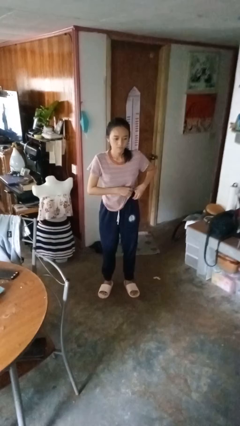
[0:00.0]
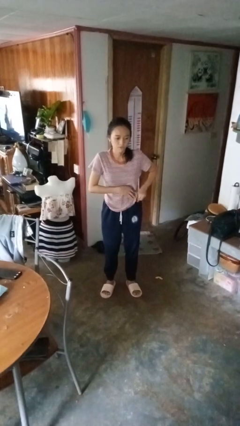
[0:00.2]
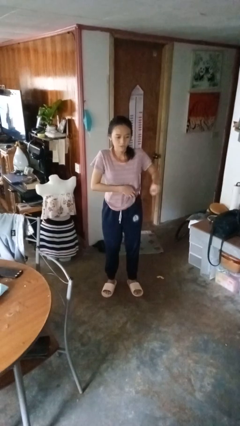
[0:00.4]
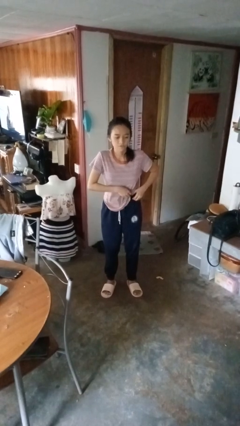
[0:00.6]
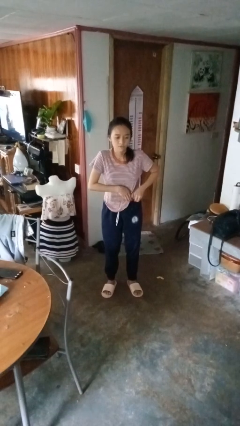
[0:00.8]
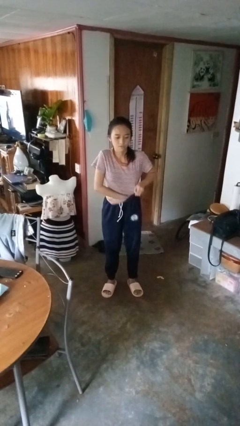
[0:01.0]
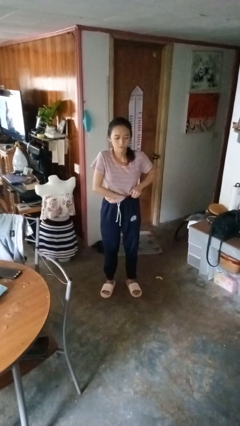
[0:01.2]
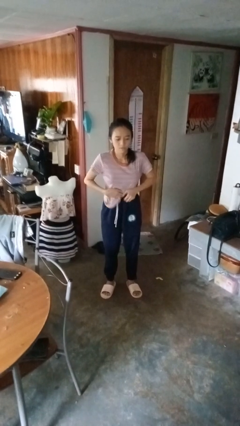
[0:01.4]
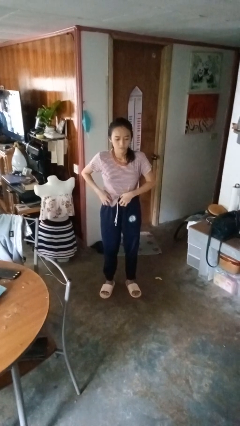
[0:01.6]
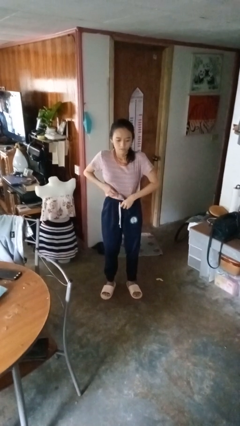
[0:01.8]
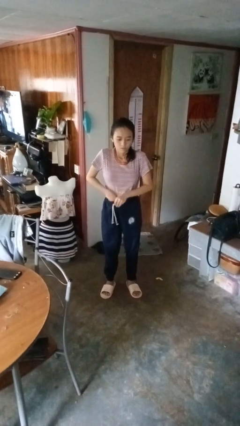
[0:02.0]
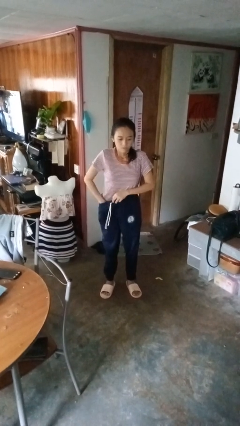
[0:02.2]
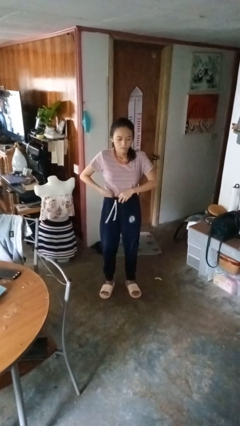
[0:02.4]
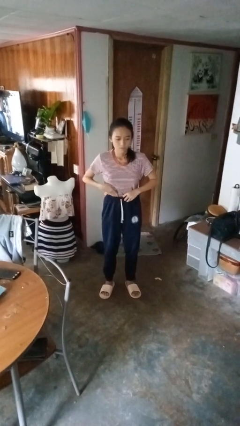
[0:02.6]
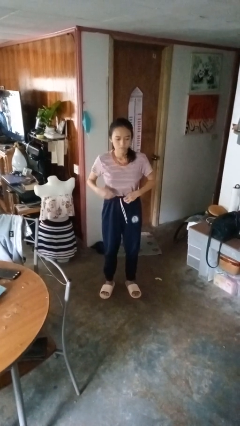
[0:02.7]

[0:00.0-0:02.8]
person tucks in shirt

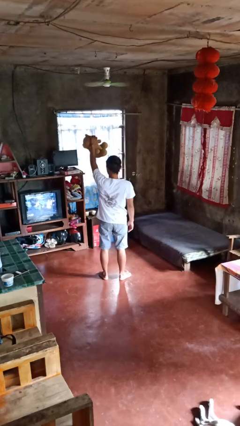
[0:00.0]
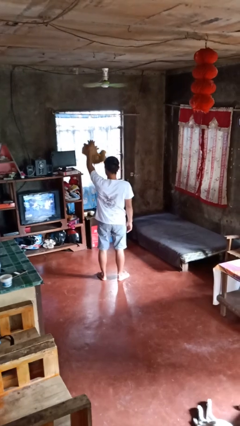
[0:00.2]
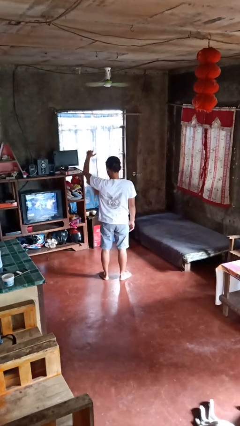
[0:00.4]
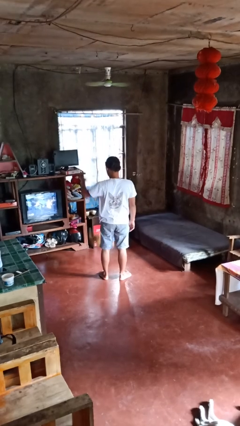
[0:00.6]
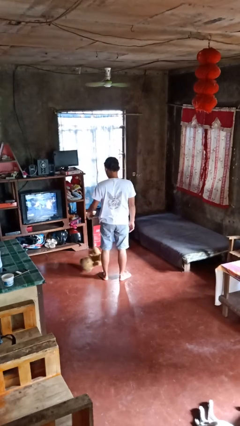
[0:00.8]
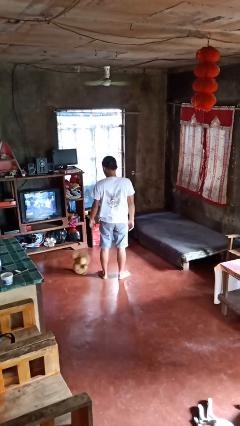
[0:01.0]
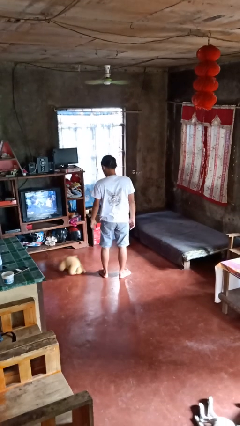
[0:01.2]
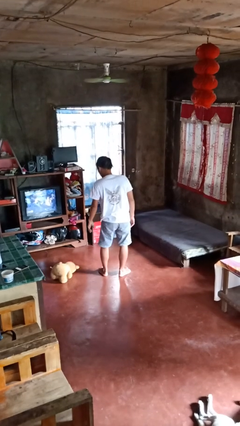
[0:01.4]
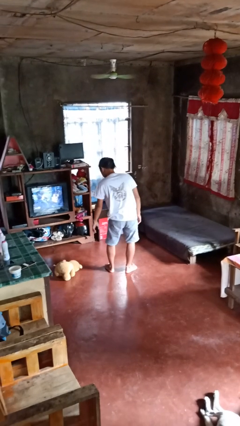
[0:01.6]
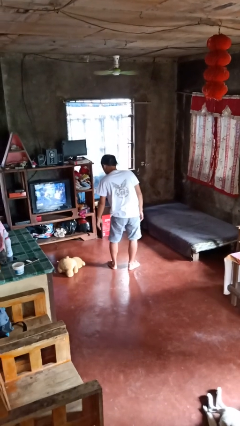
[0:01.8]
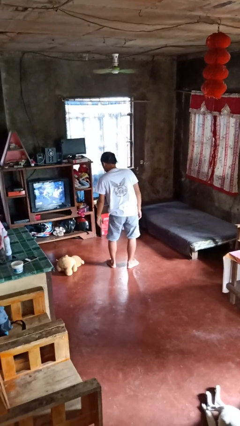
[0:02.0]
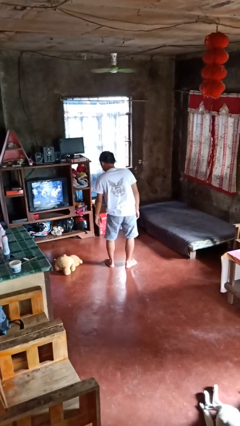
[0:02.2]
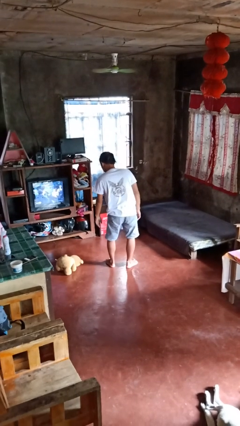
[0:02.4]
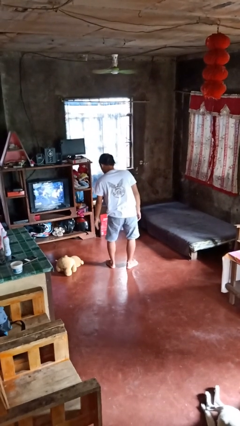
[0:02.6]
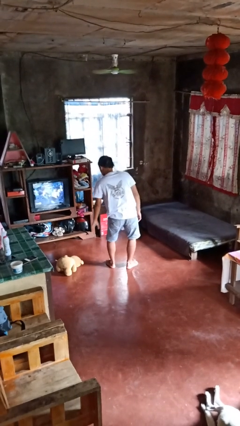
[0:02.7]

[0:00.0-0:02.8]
person drops object

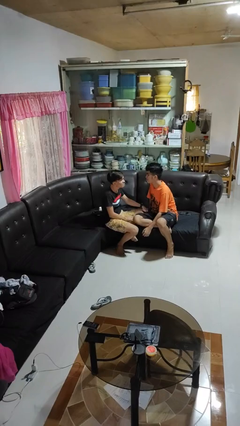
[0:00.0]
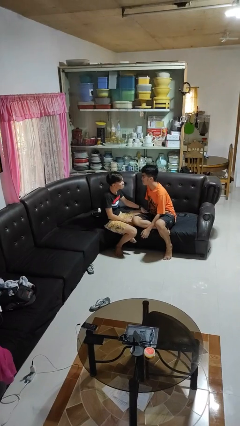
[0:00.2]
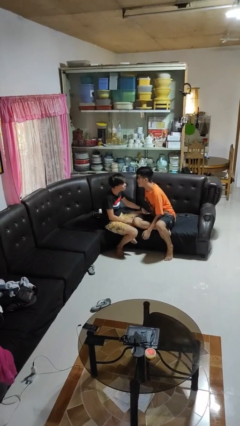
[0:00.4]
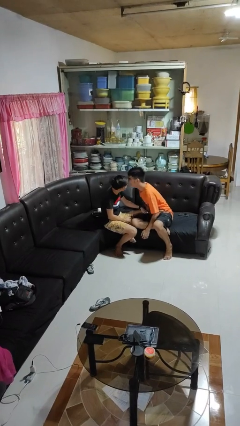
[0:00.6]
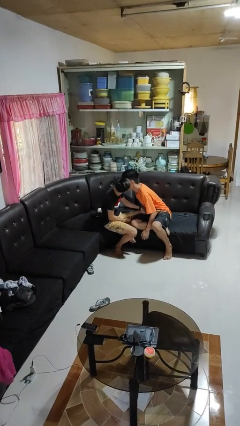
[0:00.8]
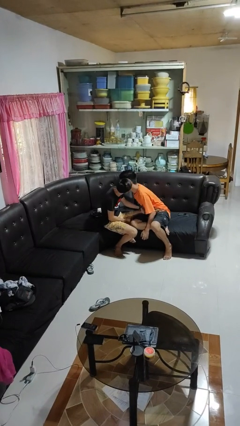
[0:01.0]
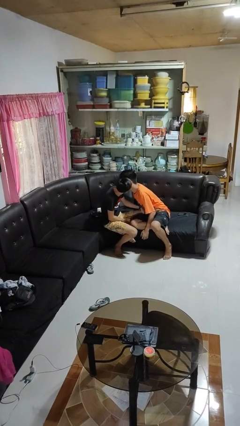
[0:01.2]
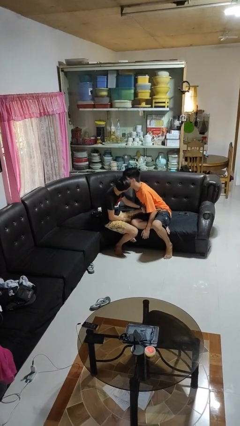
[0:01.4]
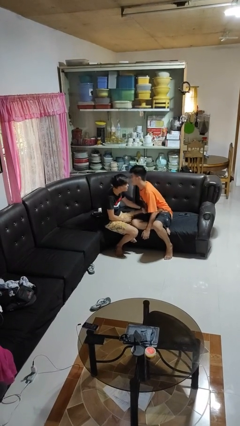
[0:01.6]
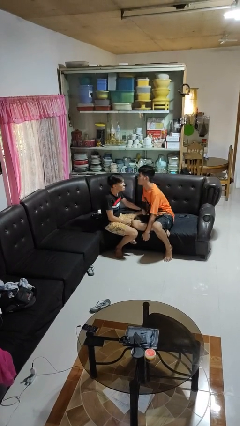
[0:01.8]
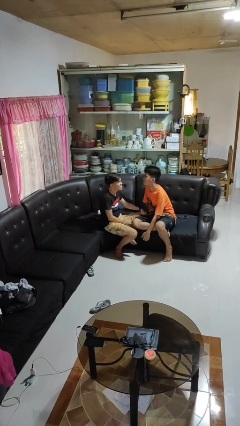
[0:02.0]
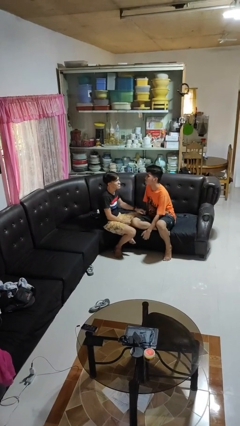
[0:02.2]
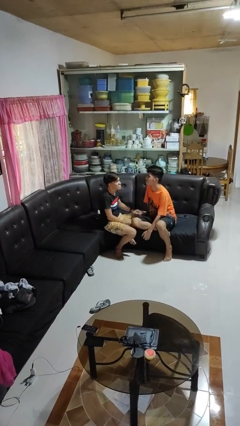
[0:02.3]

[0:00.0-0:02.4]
person kisses cheek of person

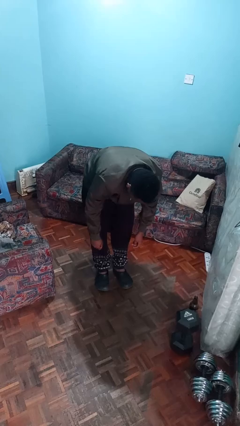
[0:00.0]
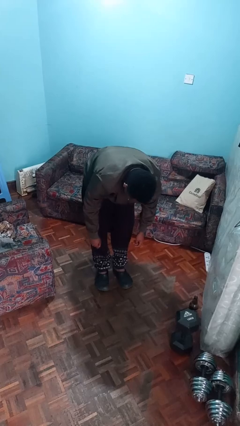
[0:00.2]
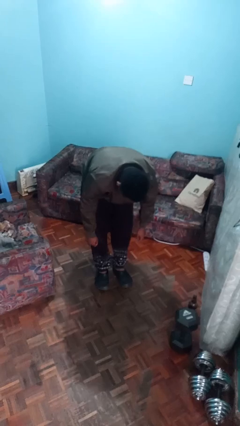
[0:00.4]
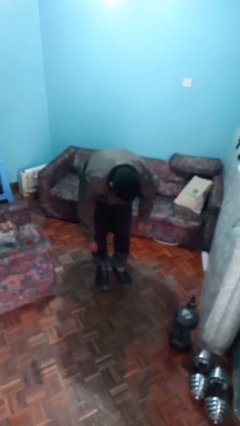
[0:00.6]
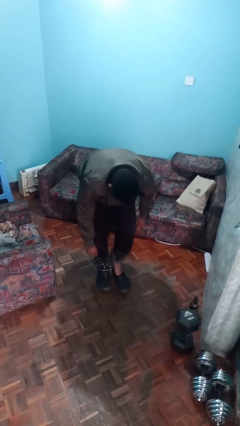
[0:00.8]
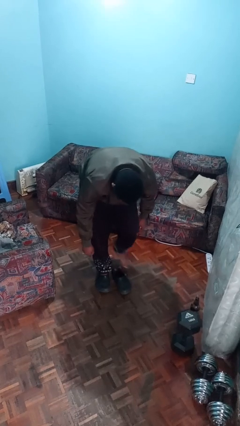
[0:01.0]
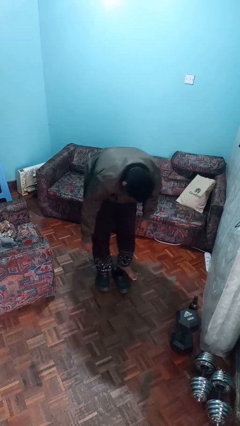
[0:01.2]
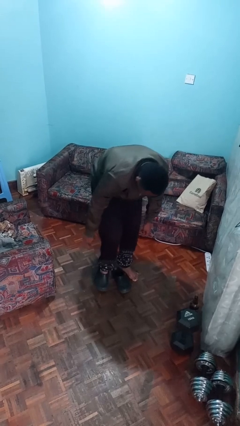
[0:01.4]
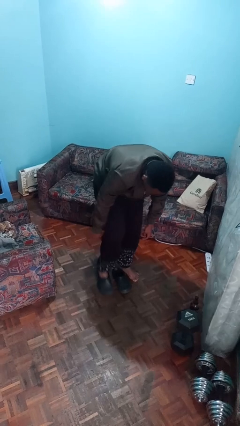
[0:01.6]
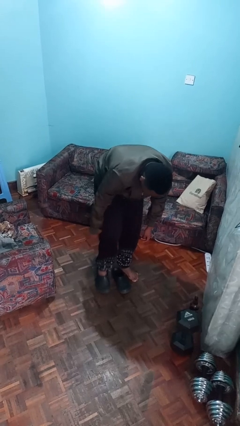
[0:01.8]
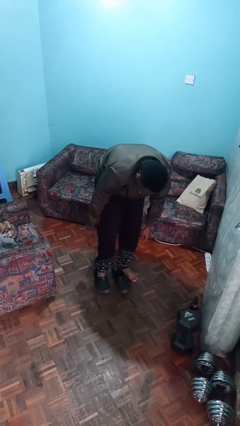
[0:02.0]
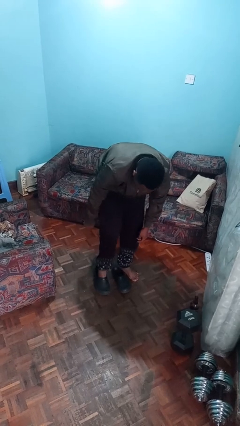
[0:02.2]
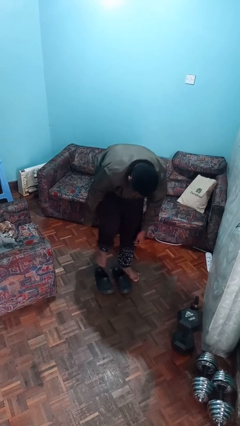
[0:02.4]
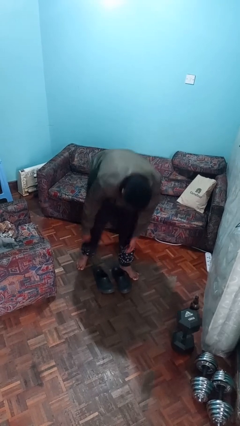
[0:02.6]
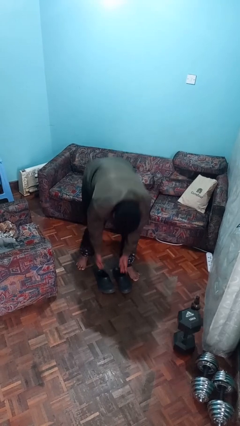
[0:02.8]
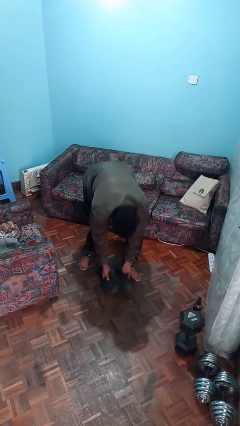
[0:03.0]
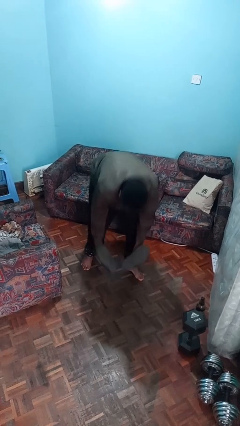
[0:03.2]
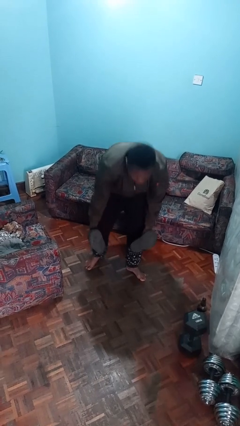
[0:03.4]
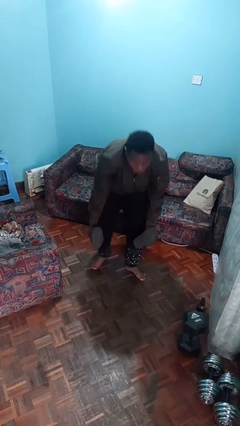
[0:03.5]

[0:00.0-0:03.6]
person takes off shoes

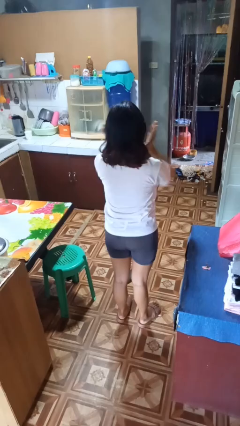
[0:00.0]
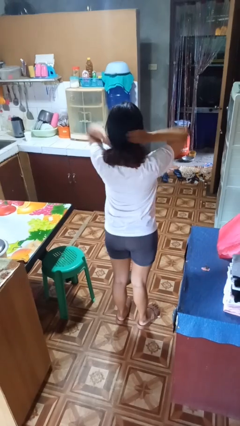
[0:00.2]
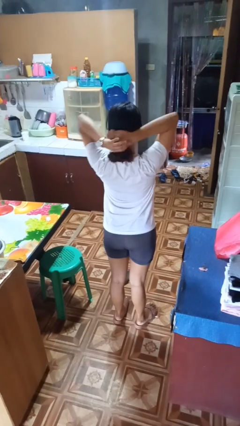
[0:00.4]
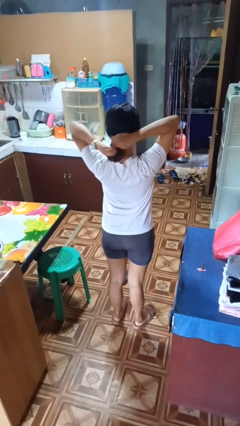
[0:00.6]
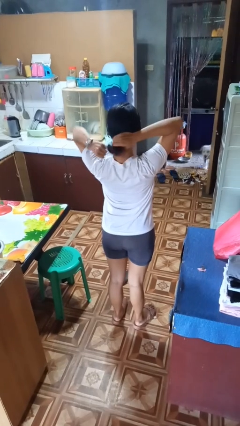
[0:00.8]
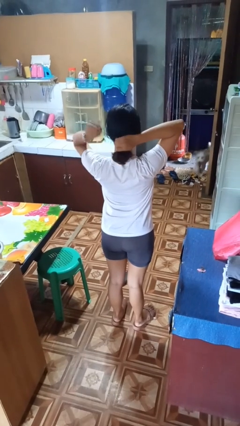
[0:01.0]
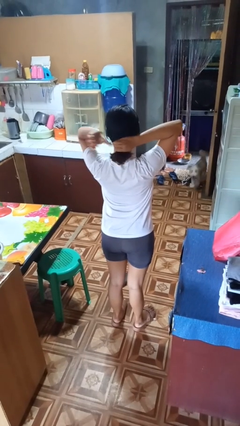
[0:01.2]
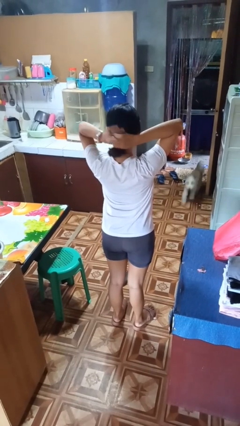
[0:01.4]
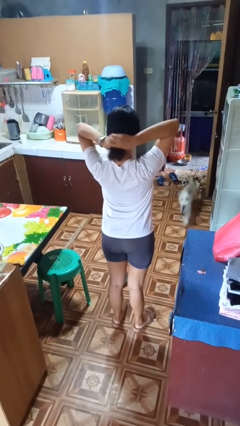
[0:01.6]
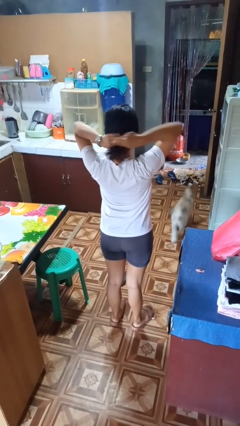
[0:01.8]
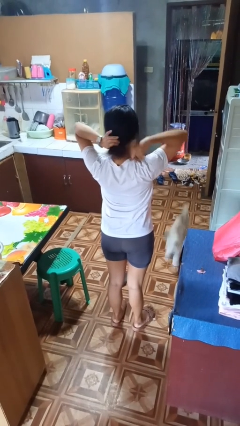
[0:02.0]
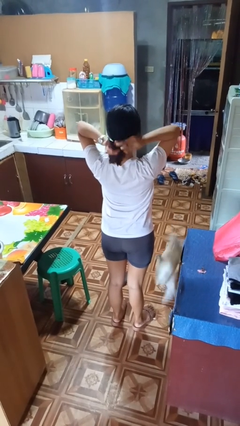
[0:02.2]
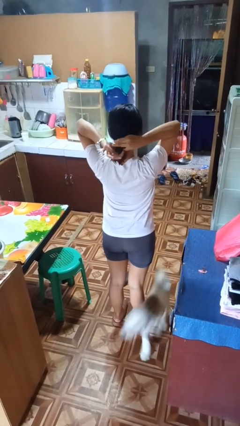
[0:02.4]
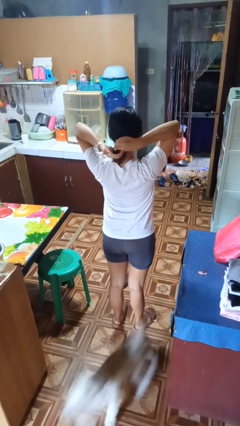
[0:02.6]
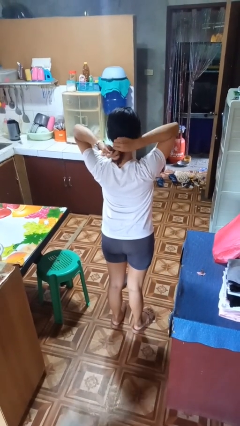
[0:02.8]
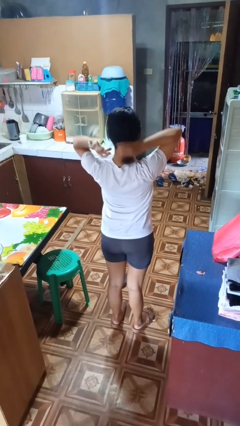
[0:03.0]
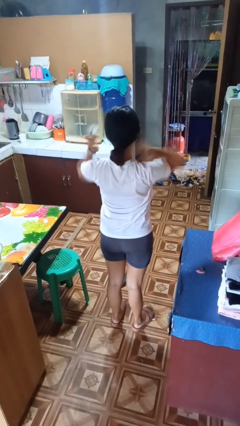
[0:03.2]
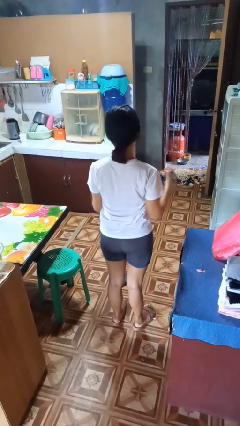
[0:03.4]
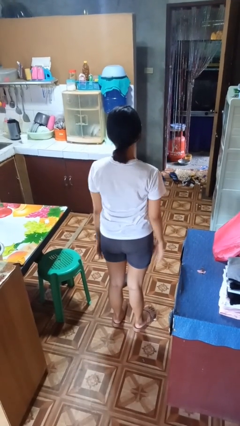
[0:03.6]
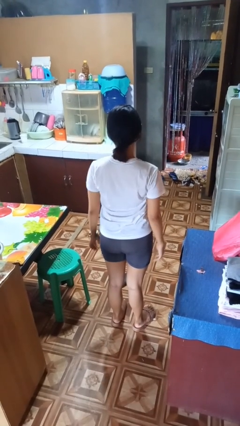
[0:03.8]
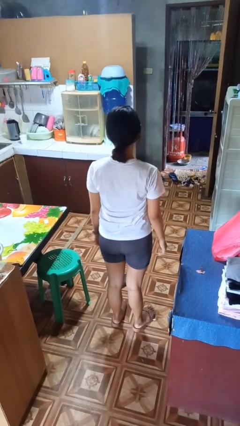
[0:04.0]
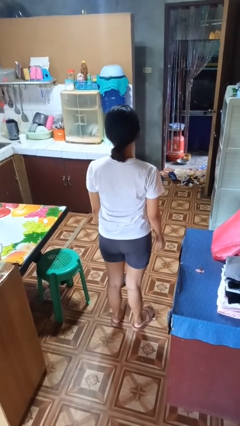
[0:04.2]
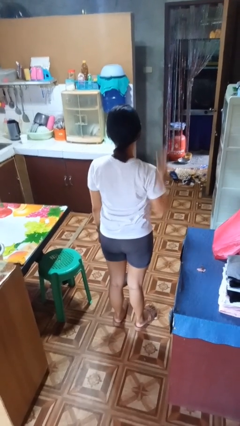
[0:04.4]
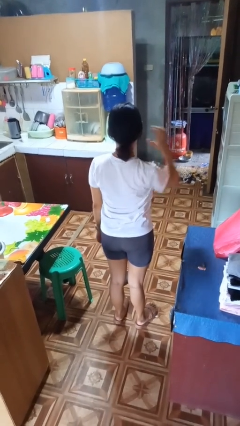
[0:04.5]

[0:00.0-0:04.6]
person puts hair in ponytail

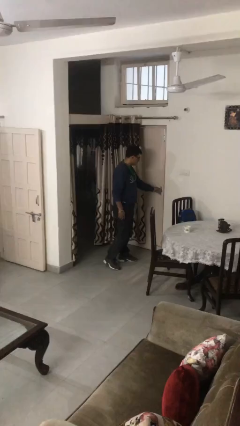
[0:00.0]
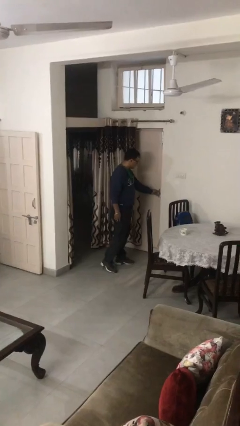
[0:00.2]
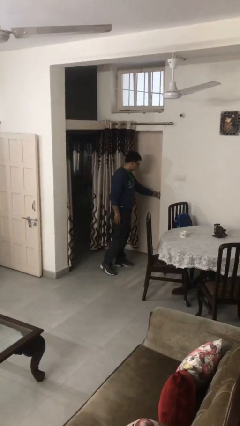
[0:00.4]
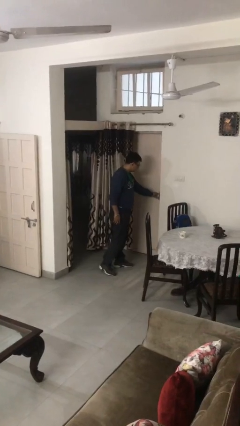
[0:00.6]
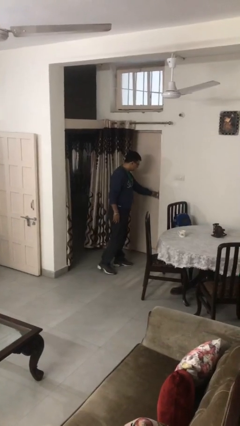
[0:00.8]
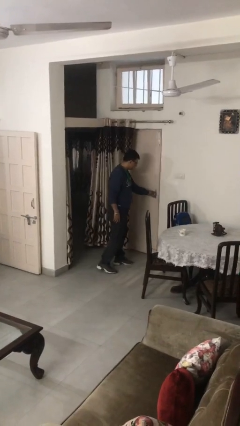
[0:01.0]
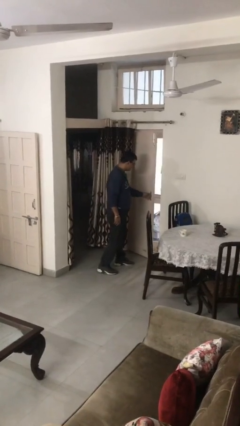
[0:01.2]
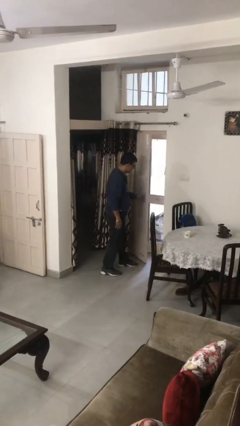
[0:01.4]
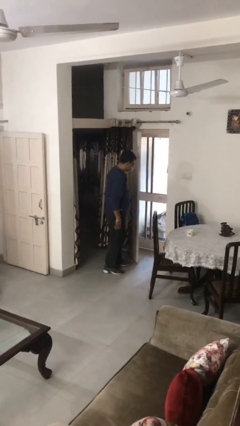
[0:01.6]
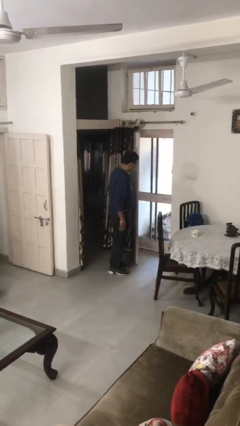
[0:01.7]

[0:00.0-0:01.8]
person opens facility door
